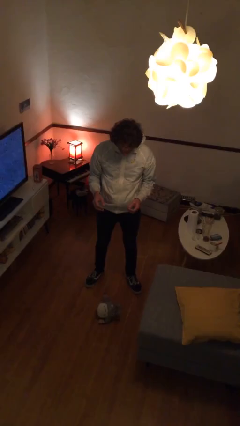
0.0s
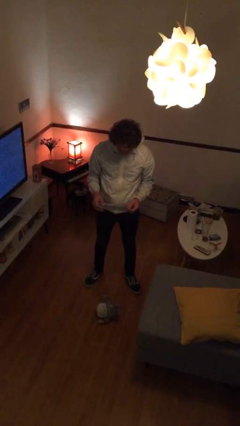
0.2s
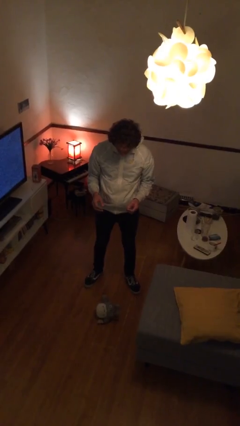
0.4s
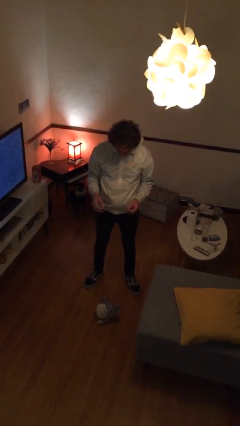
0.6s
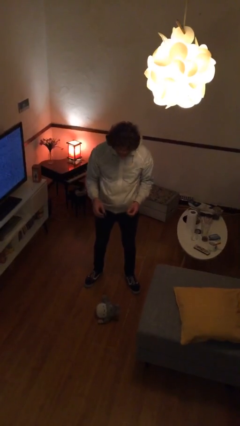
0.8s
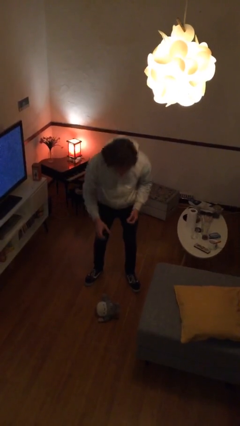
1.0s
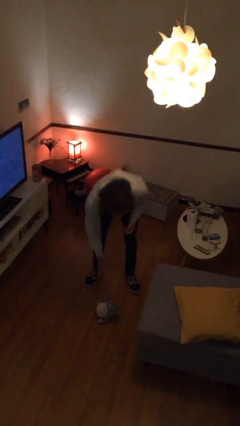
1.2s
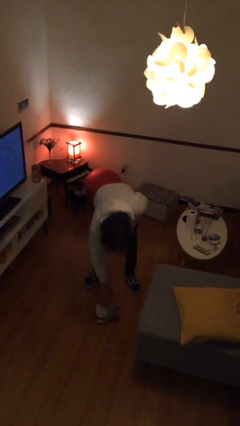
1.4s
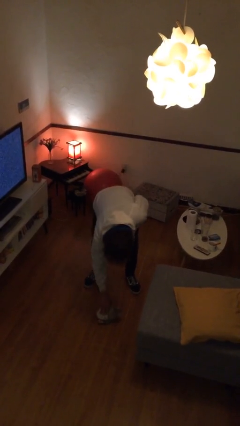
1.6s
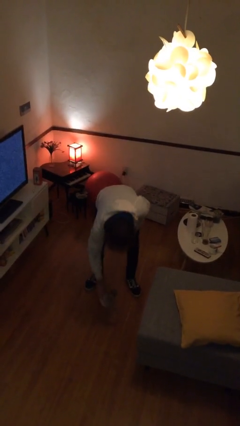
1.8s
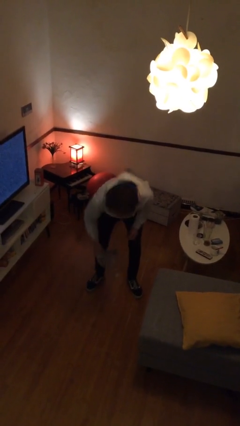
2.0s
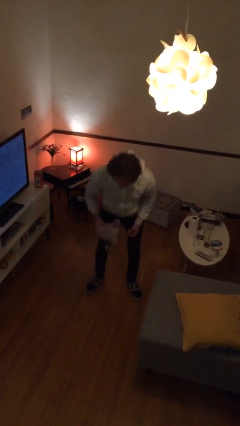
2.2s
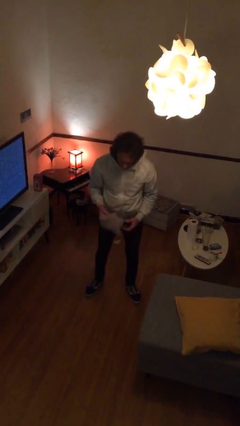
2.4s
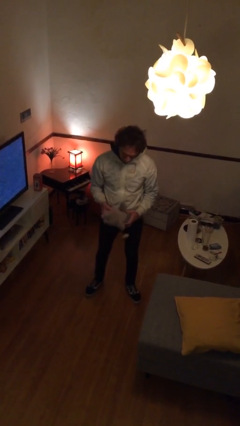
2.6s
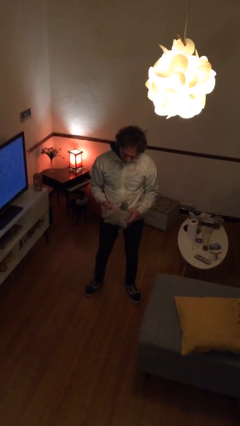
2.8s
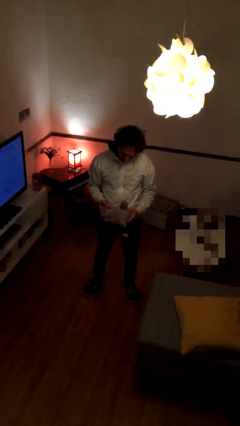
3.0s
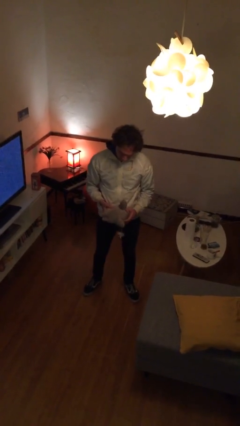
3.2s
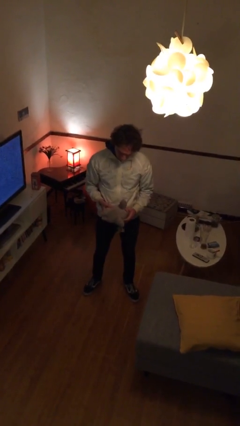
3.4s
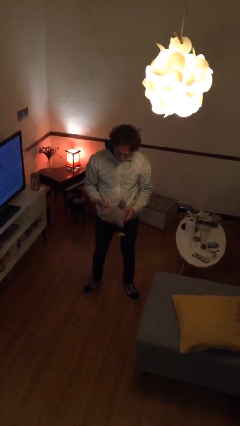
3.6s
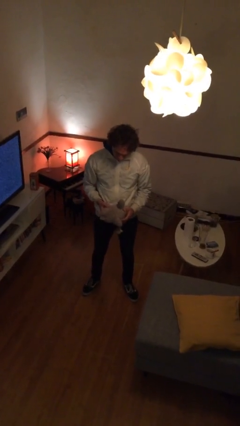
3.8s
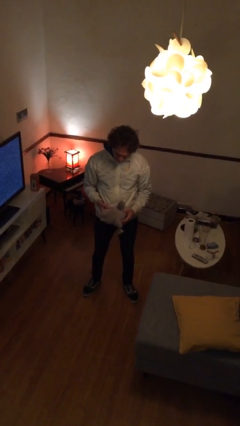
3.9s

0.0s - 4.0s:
person picks up object from floor

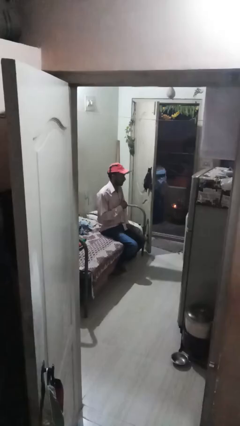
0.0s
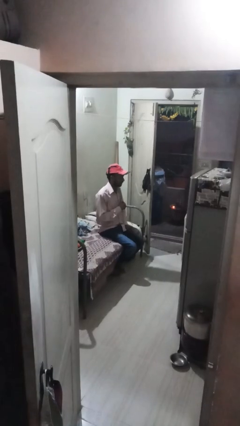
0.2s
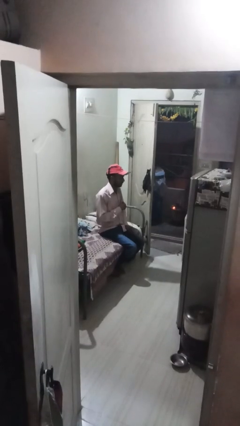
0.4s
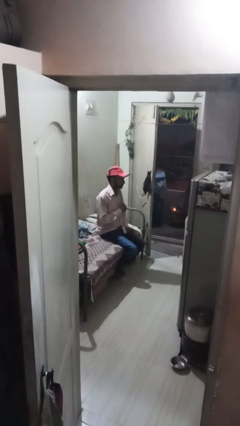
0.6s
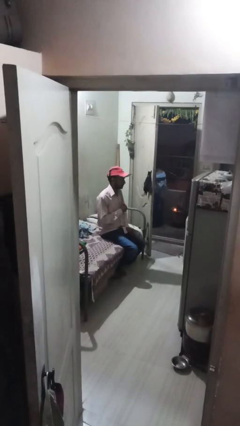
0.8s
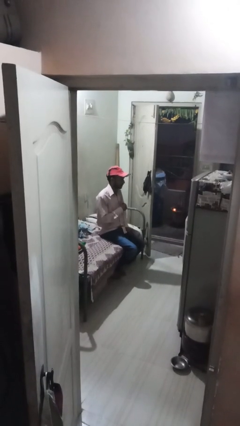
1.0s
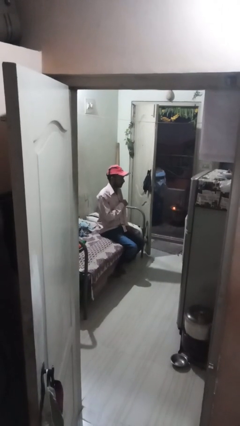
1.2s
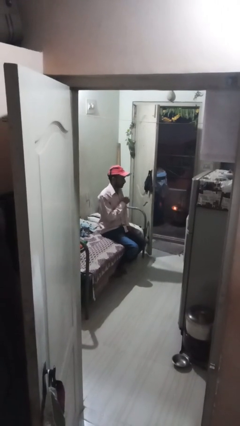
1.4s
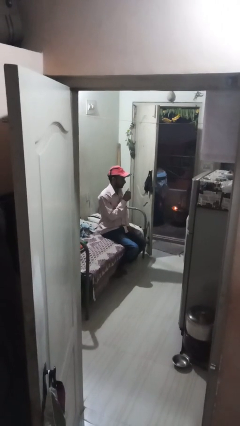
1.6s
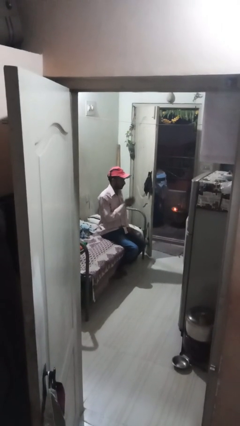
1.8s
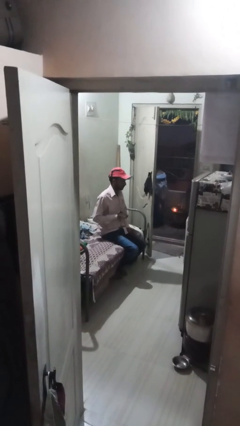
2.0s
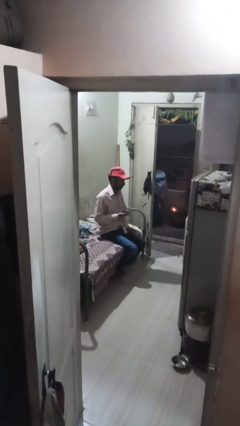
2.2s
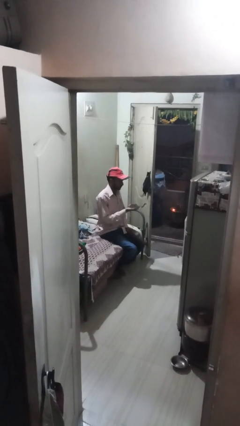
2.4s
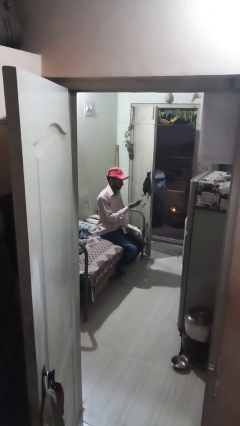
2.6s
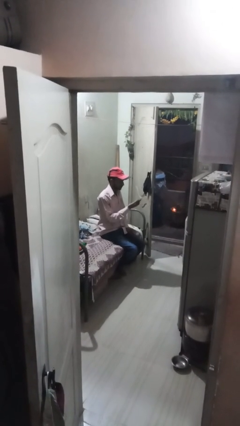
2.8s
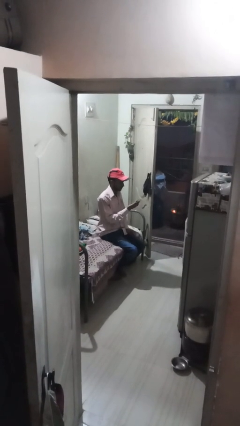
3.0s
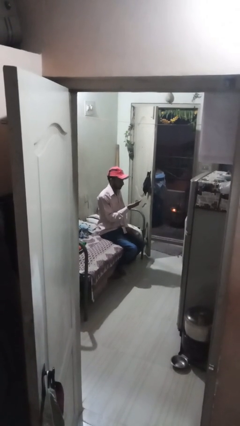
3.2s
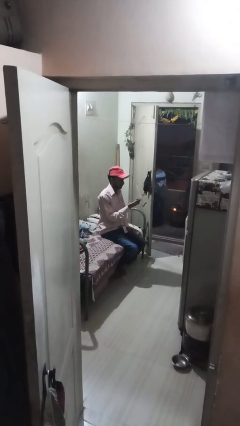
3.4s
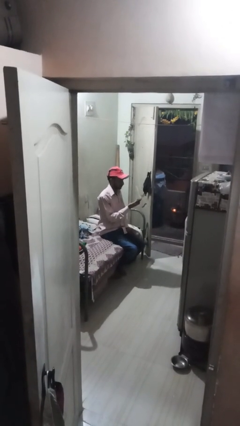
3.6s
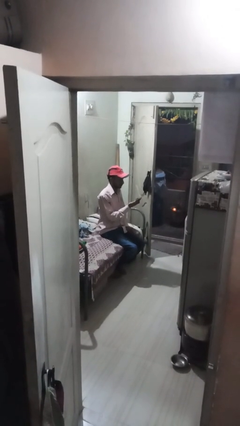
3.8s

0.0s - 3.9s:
person takes phone from pocket

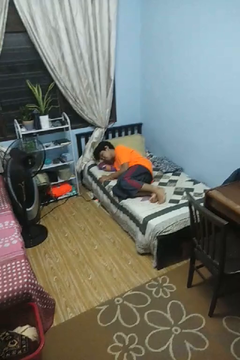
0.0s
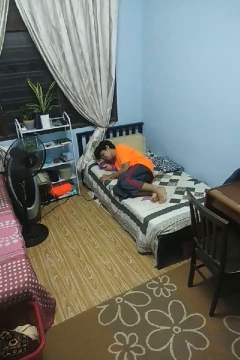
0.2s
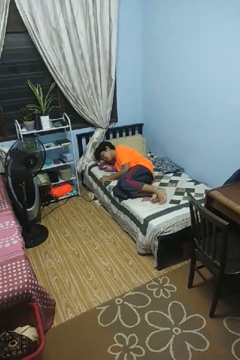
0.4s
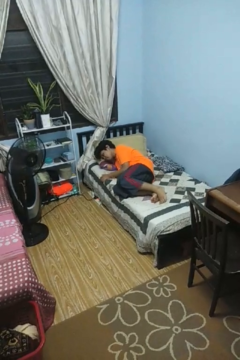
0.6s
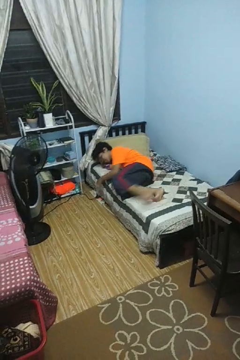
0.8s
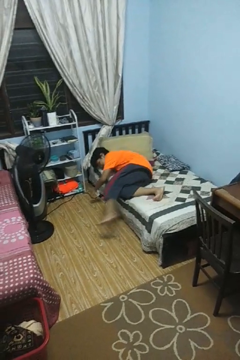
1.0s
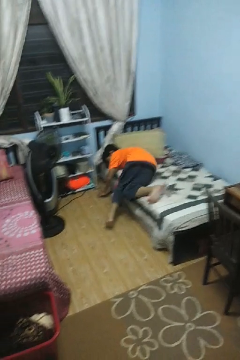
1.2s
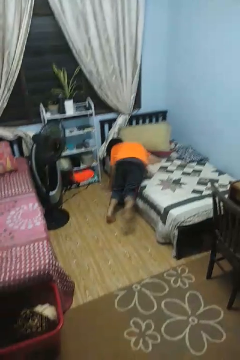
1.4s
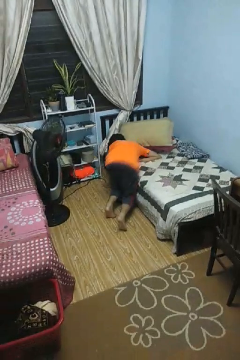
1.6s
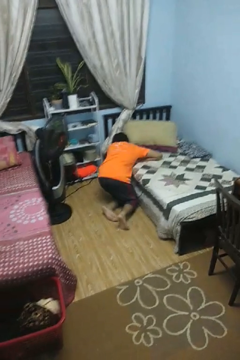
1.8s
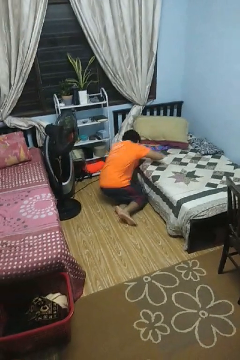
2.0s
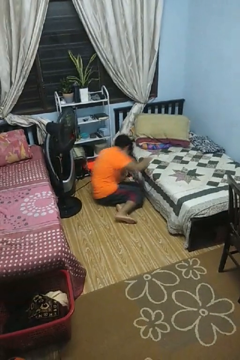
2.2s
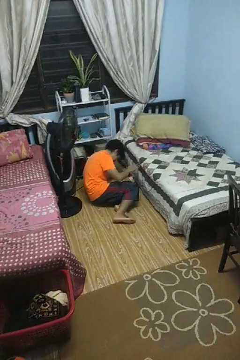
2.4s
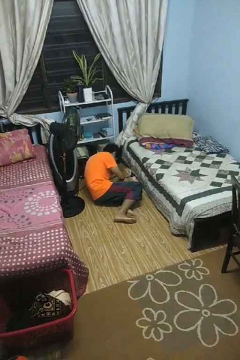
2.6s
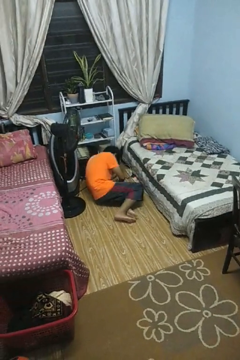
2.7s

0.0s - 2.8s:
person falls from bed

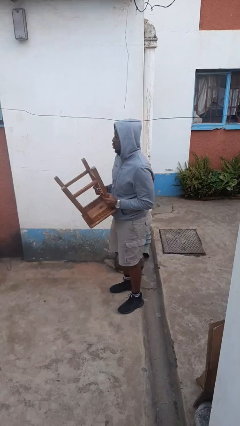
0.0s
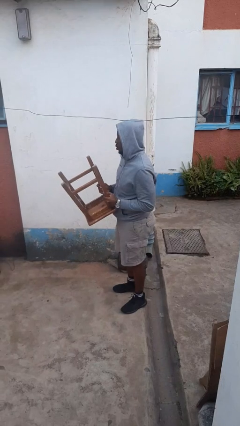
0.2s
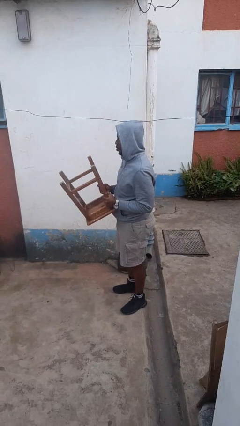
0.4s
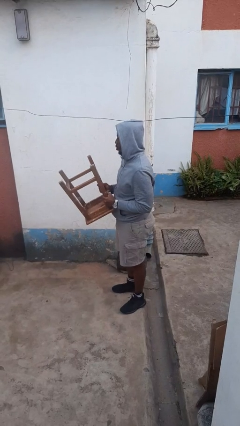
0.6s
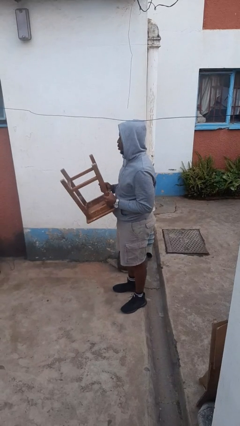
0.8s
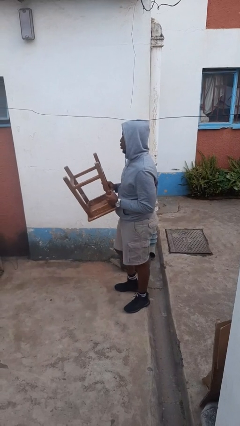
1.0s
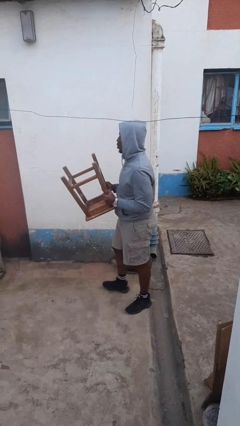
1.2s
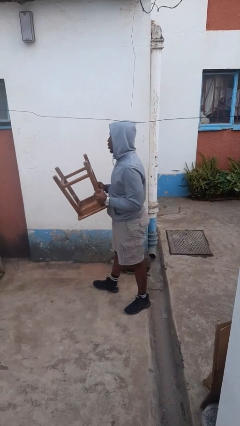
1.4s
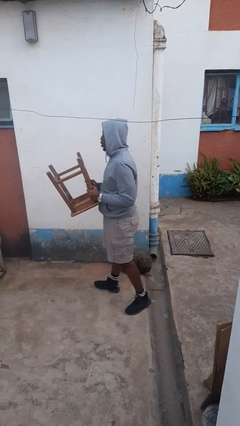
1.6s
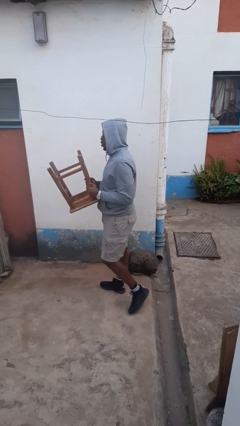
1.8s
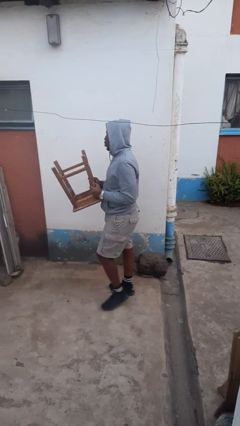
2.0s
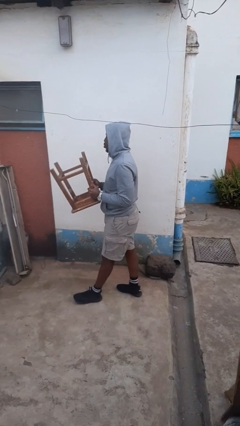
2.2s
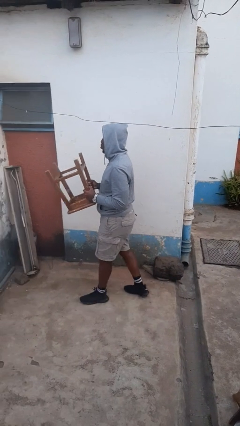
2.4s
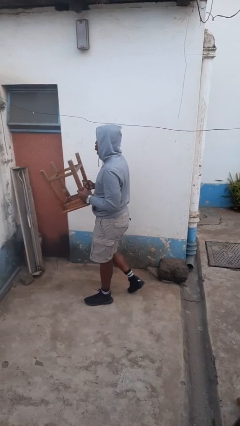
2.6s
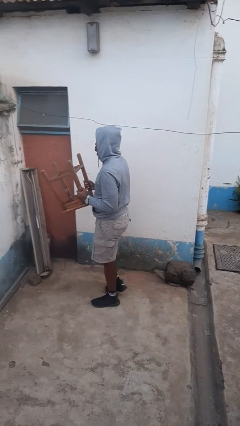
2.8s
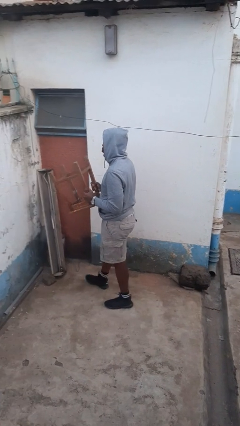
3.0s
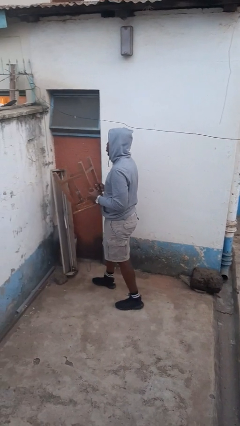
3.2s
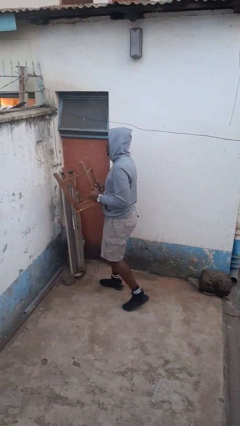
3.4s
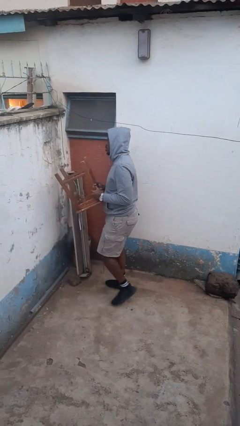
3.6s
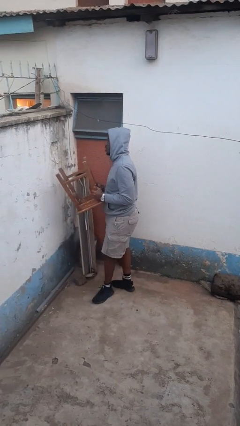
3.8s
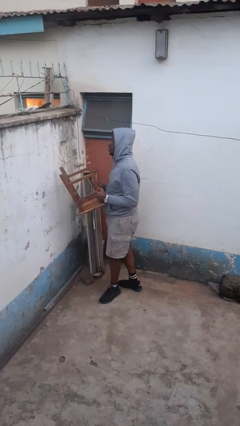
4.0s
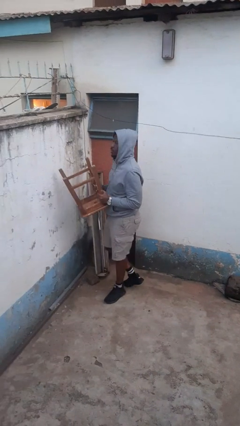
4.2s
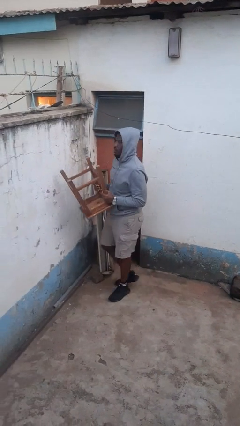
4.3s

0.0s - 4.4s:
person carries furniture

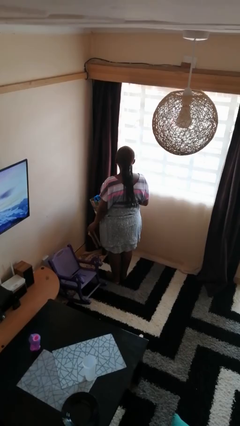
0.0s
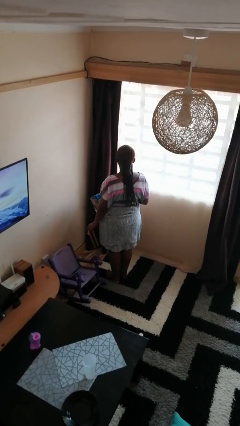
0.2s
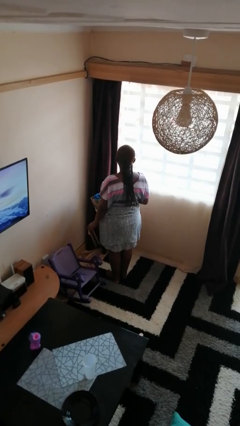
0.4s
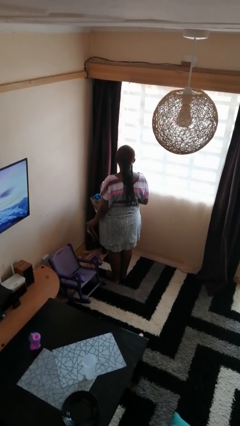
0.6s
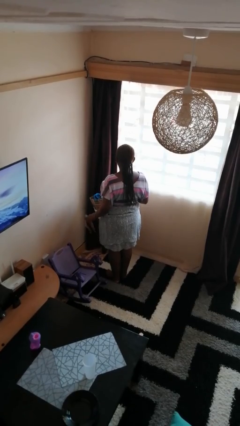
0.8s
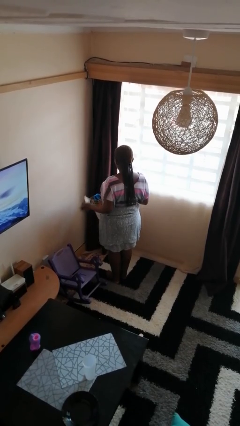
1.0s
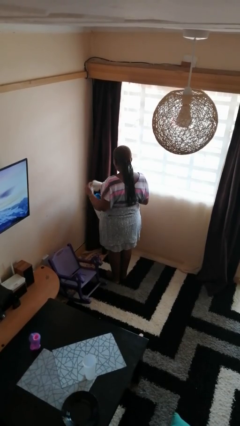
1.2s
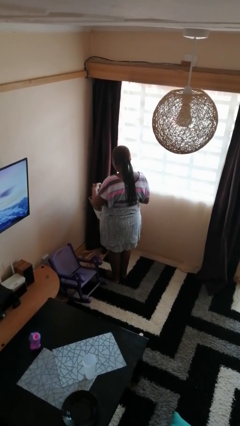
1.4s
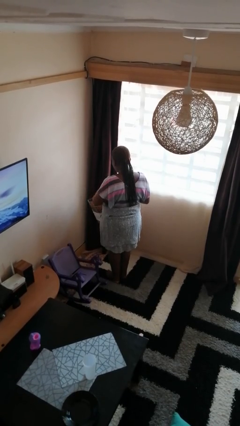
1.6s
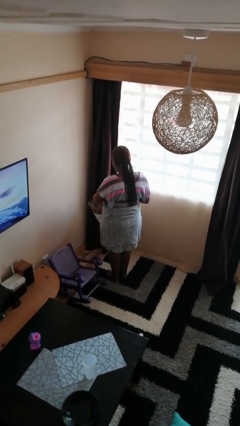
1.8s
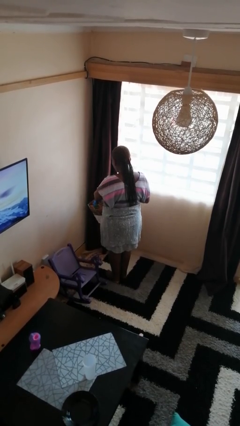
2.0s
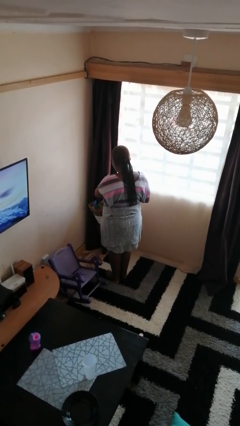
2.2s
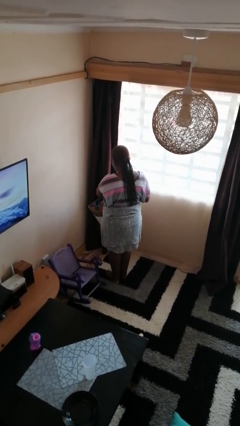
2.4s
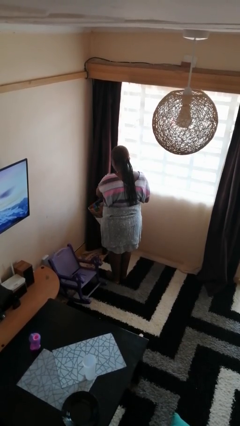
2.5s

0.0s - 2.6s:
person puts object into bag

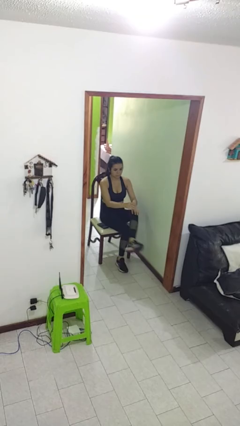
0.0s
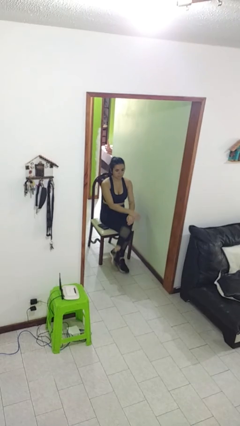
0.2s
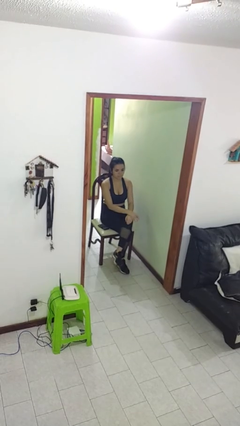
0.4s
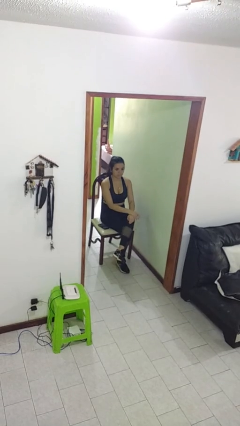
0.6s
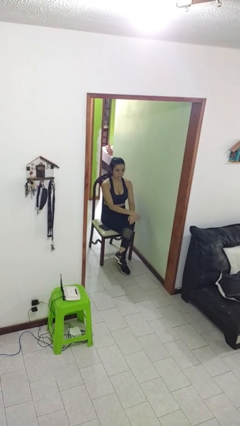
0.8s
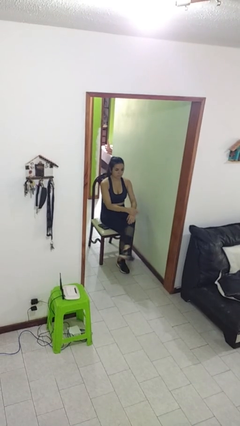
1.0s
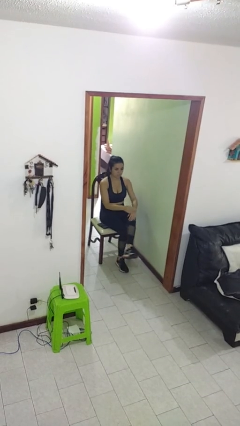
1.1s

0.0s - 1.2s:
person crosses legs
